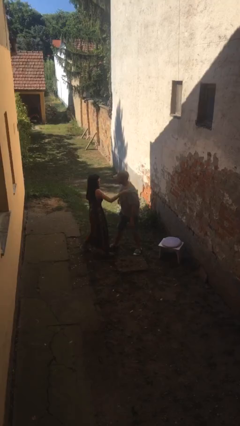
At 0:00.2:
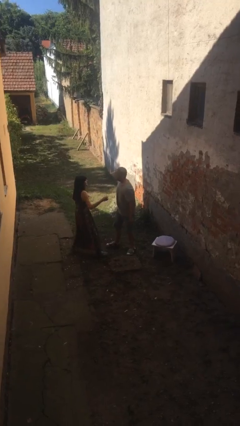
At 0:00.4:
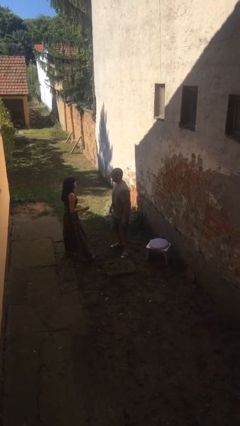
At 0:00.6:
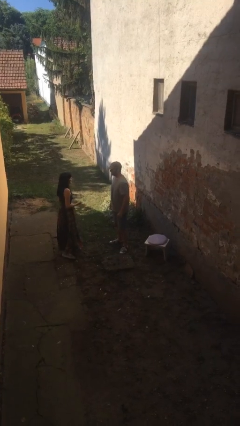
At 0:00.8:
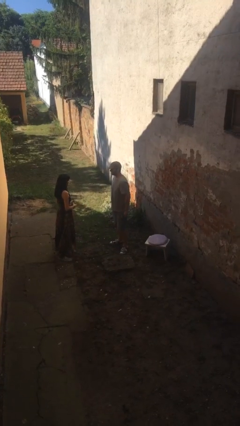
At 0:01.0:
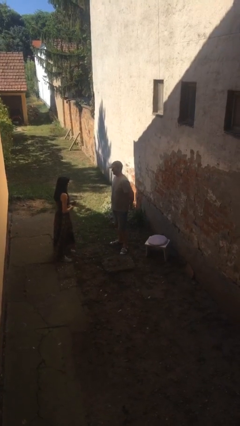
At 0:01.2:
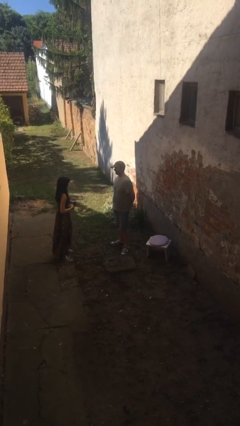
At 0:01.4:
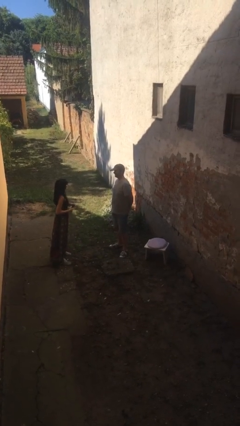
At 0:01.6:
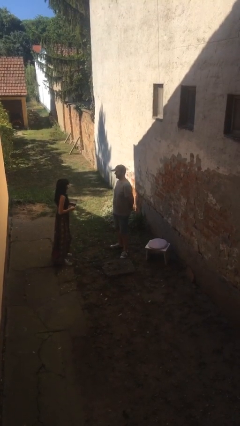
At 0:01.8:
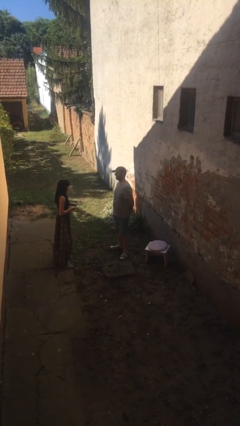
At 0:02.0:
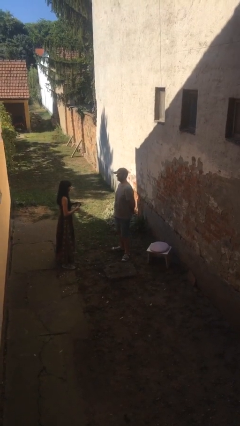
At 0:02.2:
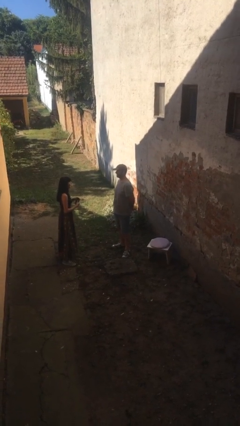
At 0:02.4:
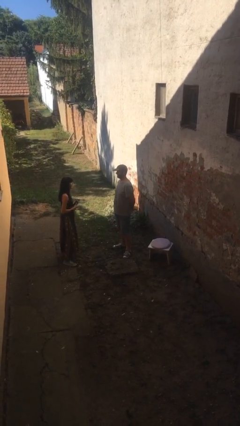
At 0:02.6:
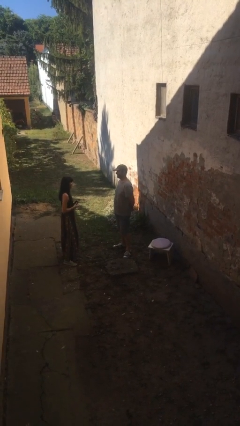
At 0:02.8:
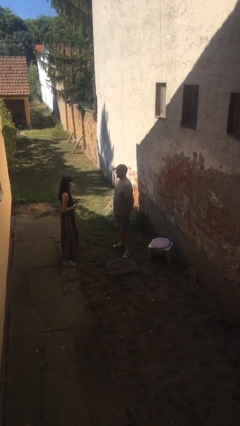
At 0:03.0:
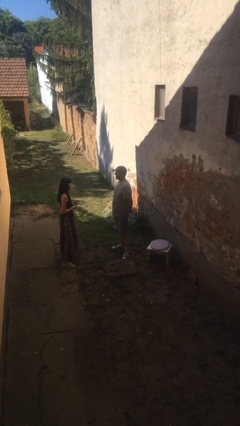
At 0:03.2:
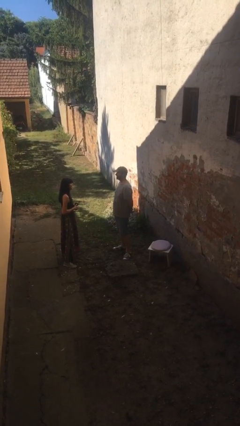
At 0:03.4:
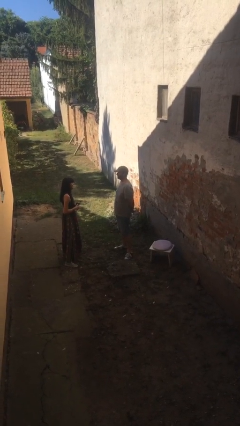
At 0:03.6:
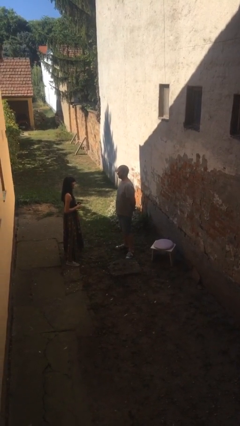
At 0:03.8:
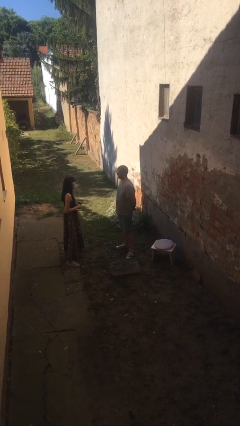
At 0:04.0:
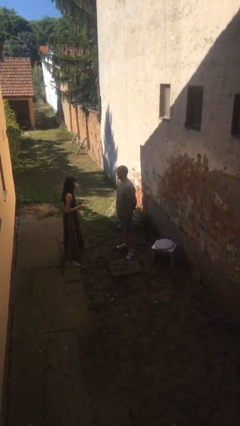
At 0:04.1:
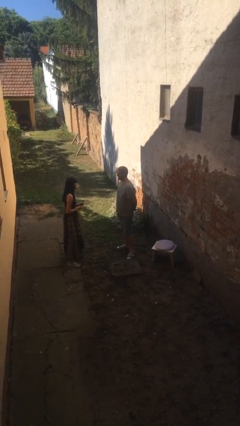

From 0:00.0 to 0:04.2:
person talks to person

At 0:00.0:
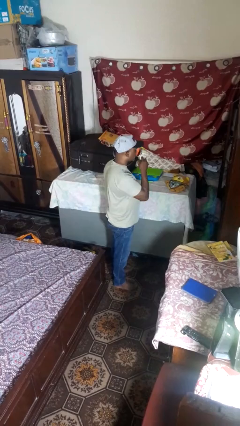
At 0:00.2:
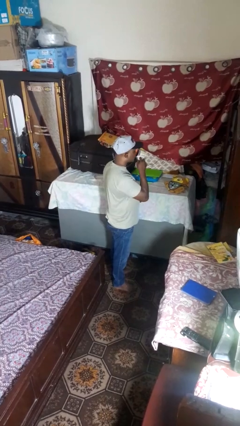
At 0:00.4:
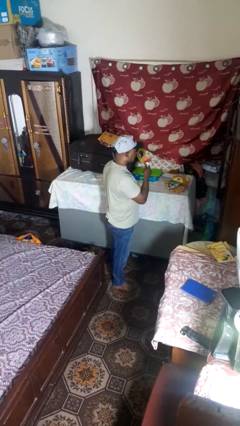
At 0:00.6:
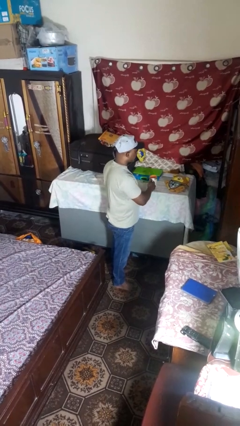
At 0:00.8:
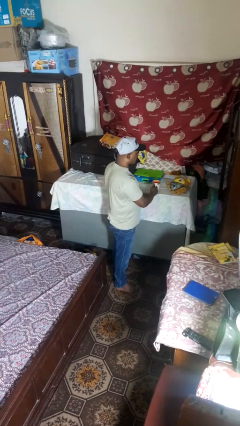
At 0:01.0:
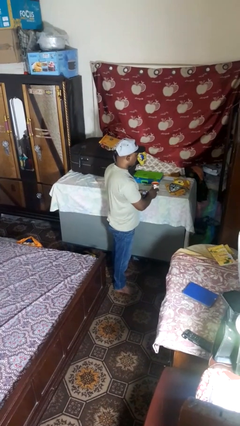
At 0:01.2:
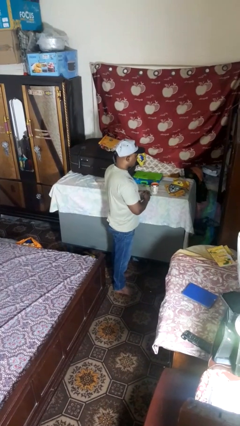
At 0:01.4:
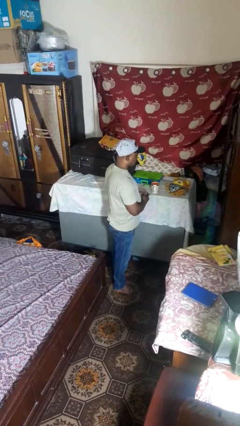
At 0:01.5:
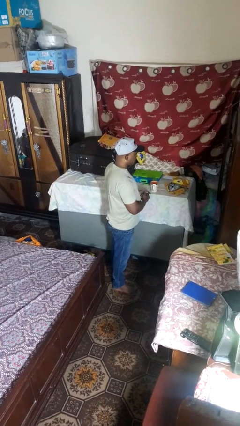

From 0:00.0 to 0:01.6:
person drinks from cup

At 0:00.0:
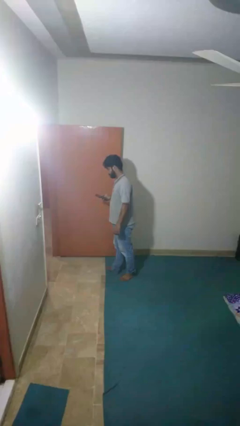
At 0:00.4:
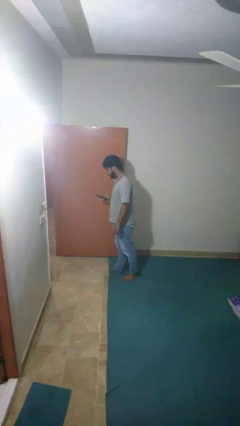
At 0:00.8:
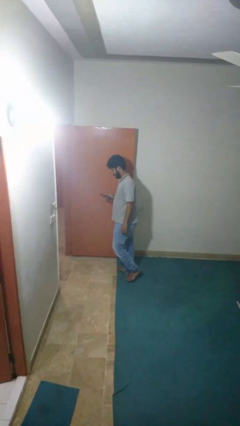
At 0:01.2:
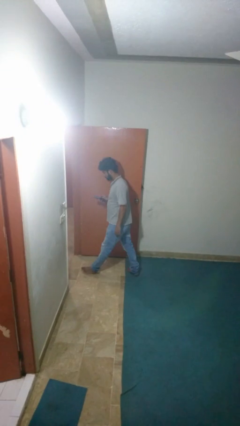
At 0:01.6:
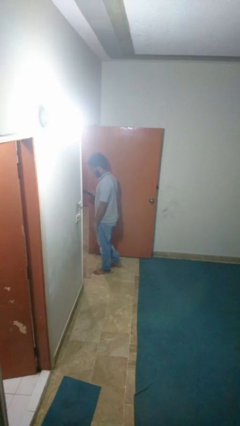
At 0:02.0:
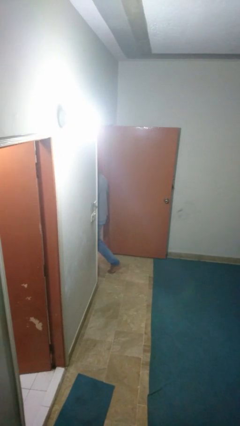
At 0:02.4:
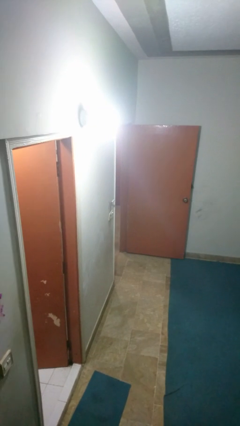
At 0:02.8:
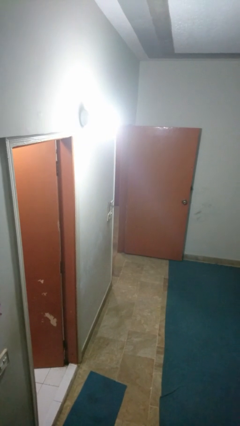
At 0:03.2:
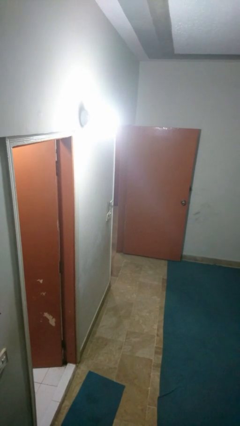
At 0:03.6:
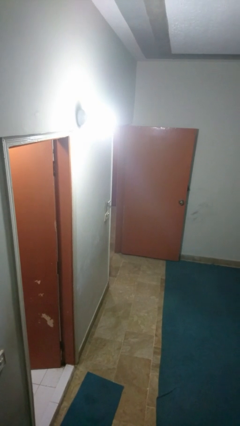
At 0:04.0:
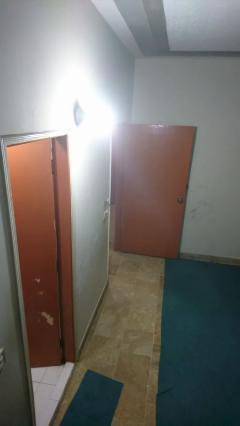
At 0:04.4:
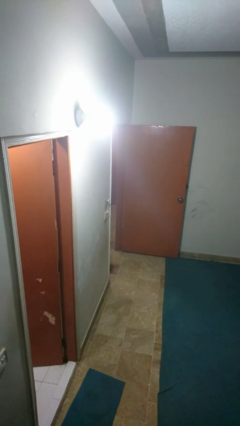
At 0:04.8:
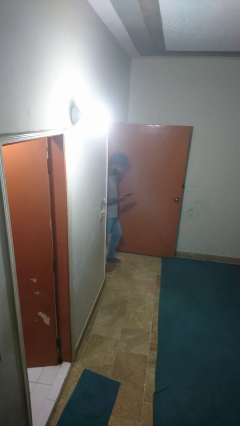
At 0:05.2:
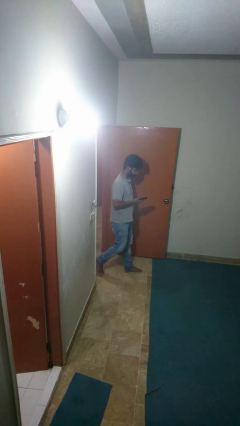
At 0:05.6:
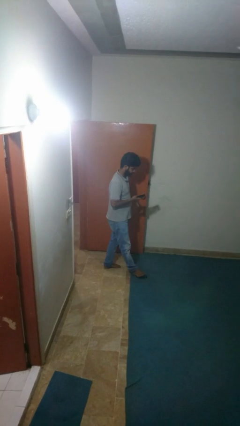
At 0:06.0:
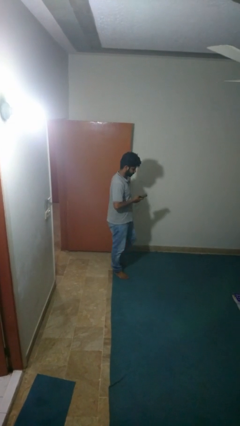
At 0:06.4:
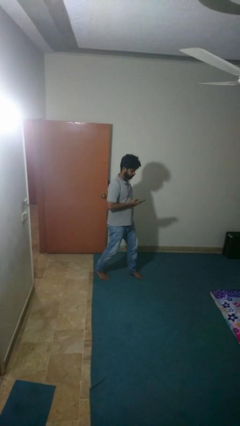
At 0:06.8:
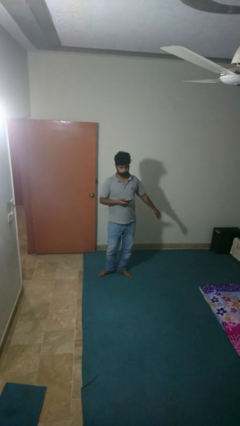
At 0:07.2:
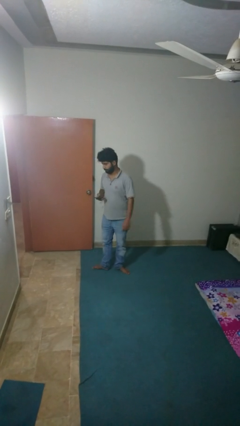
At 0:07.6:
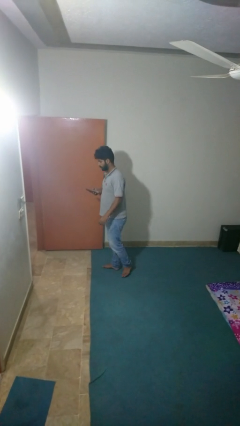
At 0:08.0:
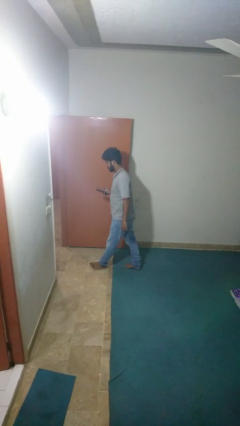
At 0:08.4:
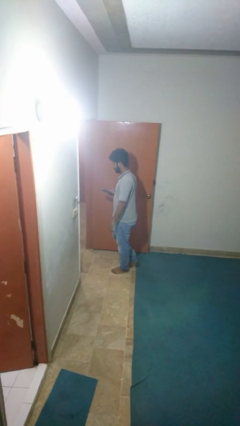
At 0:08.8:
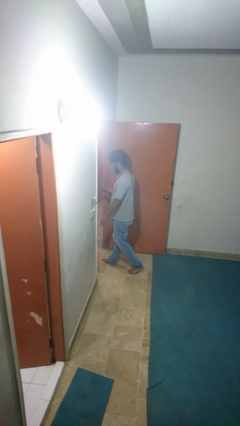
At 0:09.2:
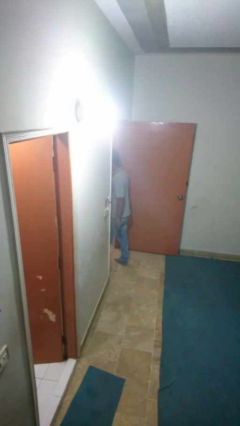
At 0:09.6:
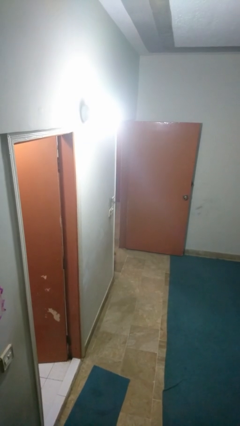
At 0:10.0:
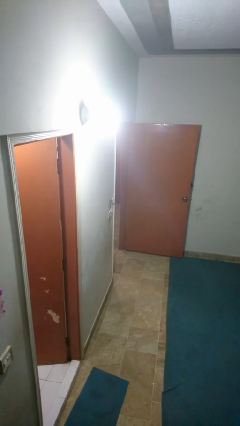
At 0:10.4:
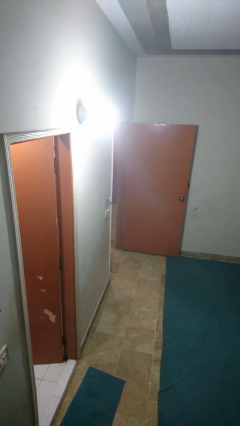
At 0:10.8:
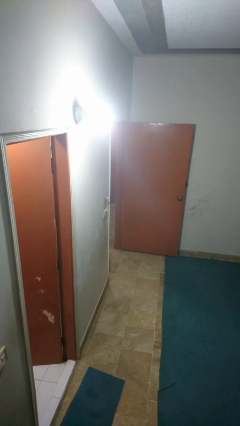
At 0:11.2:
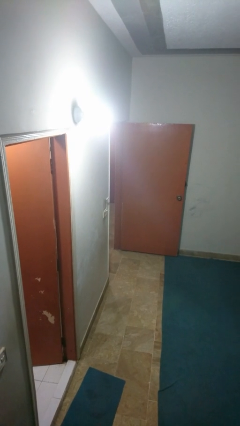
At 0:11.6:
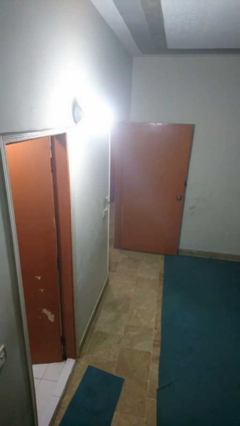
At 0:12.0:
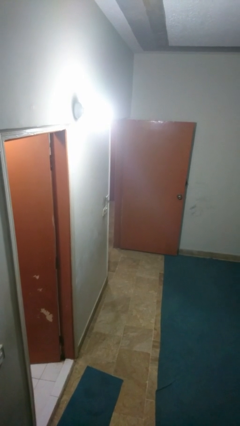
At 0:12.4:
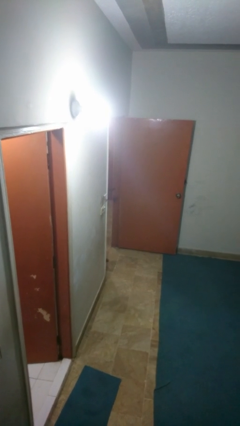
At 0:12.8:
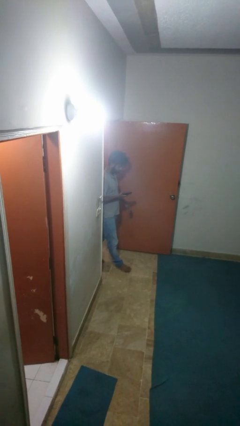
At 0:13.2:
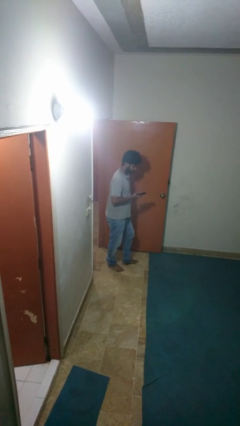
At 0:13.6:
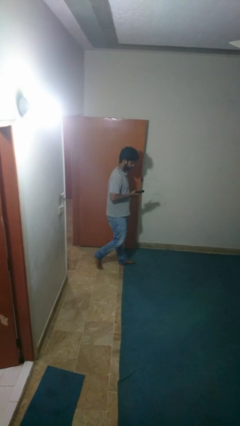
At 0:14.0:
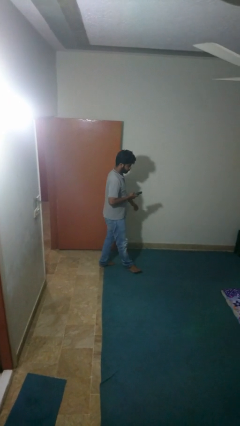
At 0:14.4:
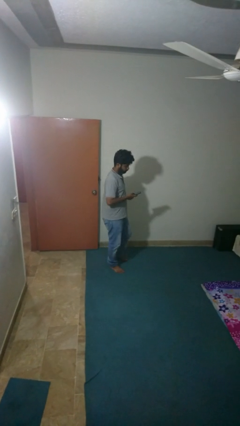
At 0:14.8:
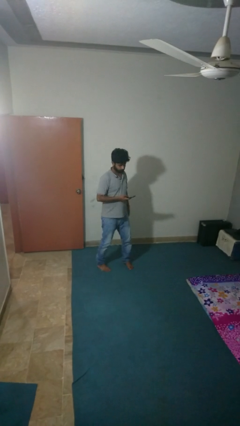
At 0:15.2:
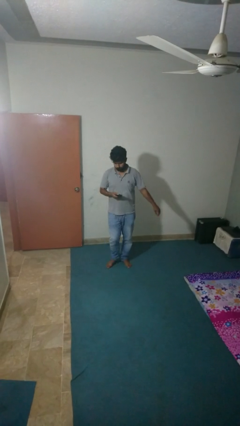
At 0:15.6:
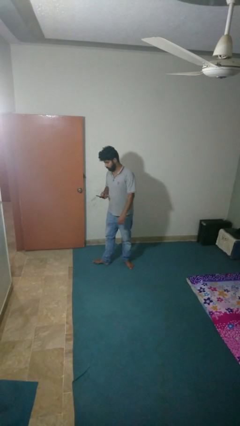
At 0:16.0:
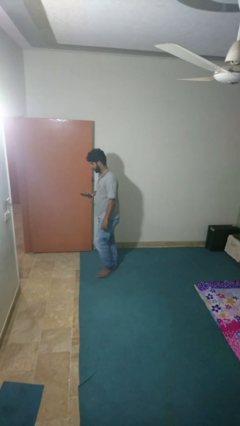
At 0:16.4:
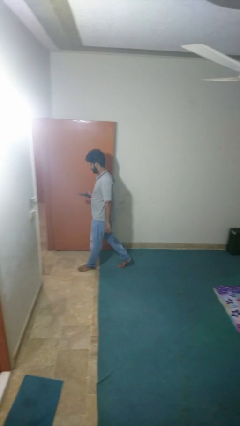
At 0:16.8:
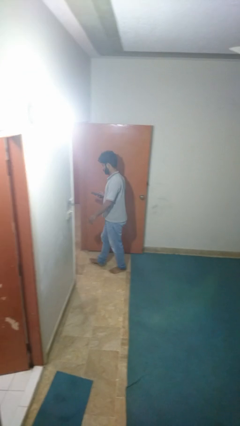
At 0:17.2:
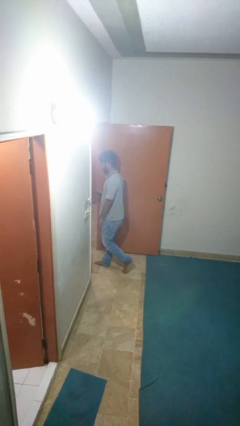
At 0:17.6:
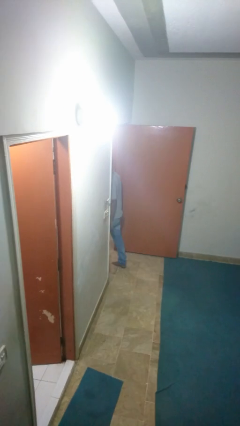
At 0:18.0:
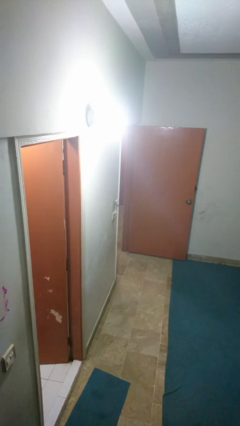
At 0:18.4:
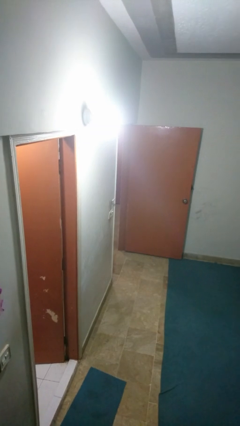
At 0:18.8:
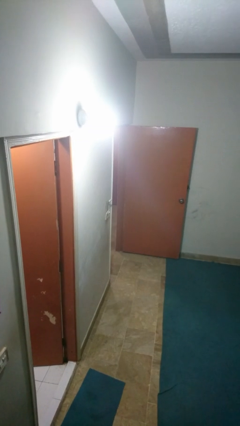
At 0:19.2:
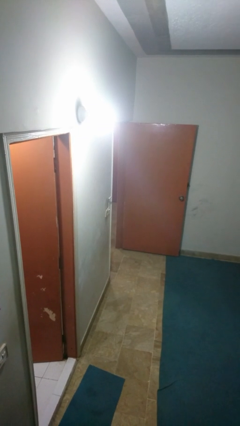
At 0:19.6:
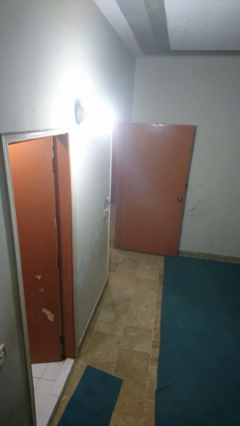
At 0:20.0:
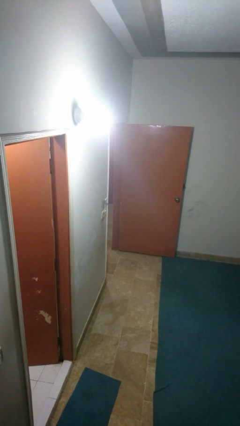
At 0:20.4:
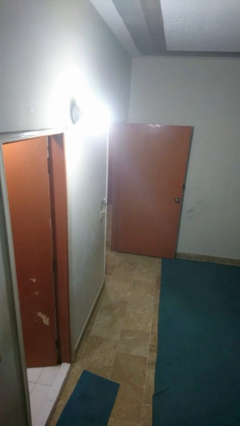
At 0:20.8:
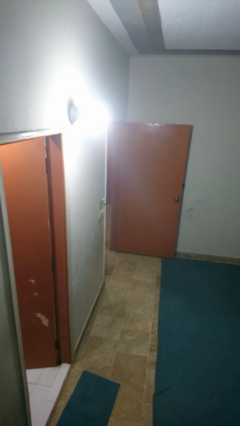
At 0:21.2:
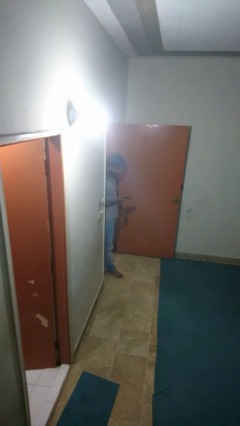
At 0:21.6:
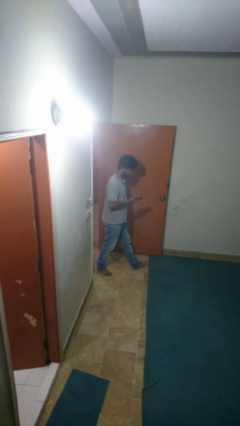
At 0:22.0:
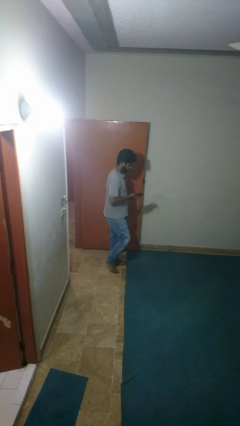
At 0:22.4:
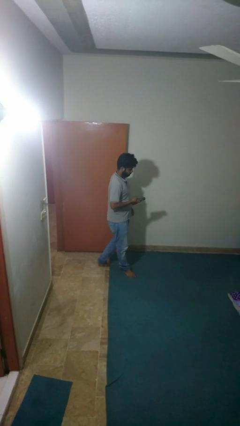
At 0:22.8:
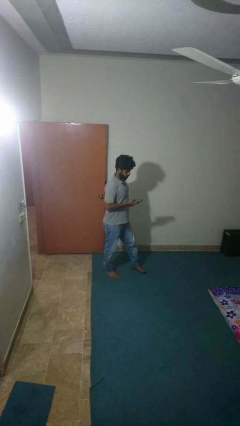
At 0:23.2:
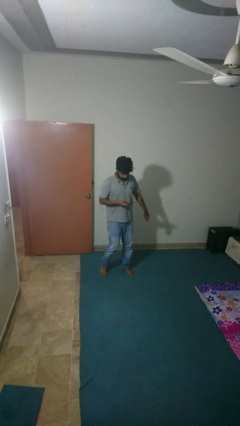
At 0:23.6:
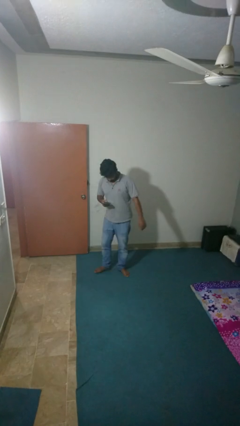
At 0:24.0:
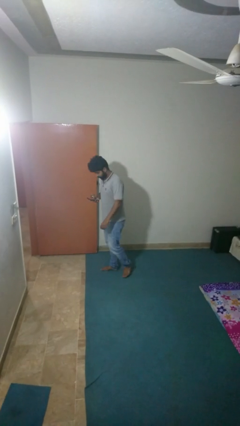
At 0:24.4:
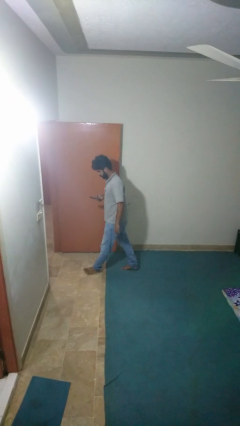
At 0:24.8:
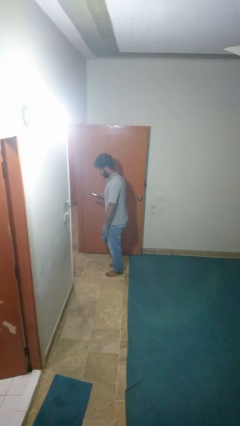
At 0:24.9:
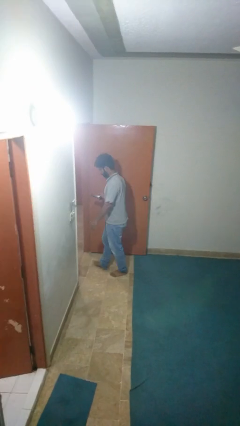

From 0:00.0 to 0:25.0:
person texts on phone
